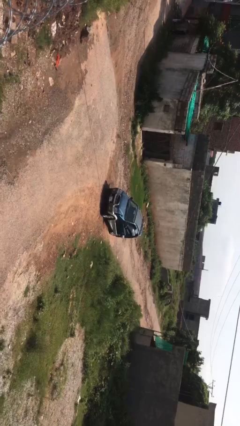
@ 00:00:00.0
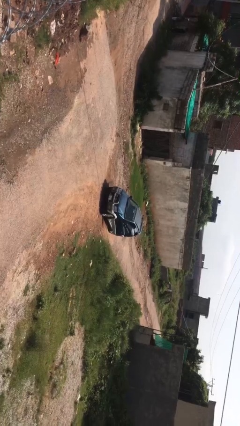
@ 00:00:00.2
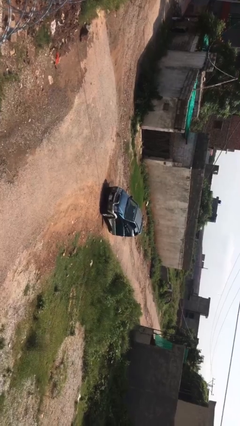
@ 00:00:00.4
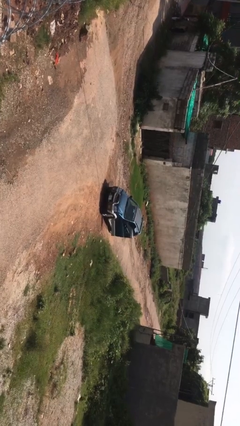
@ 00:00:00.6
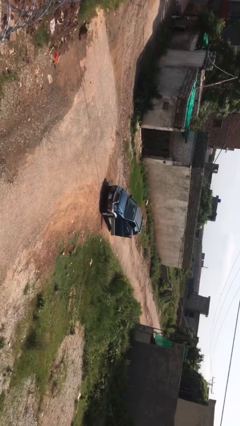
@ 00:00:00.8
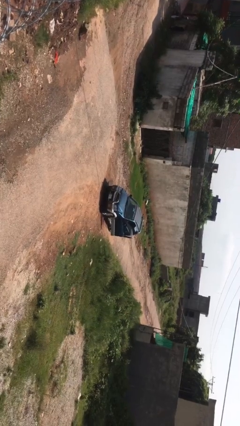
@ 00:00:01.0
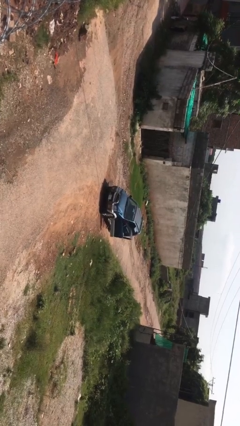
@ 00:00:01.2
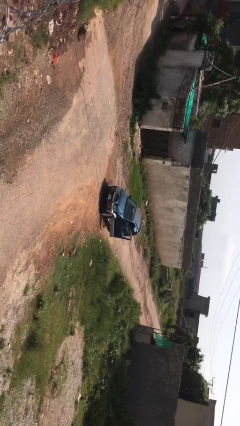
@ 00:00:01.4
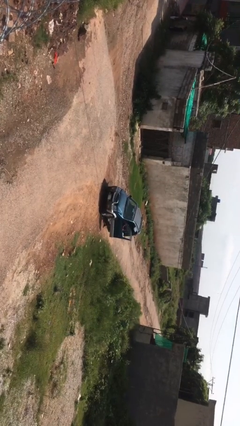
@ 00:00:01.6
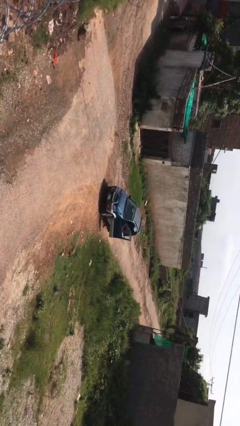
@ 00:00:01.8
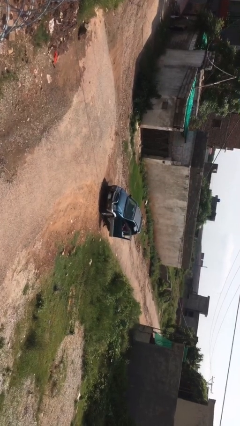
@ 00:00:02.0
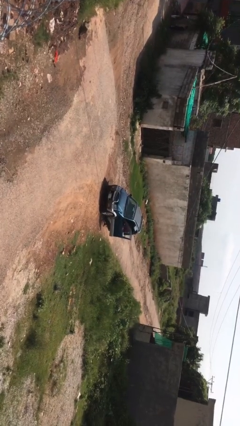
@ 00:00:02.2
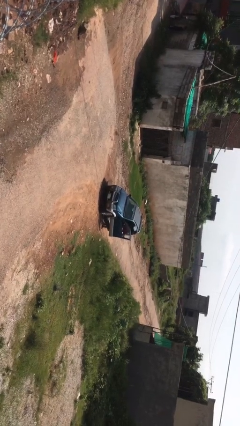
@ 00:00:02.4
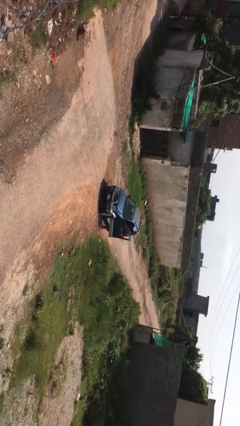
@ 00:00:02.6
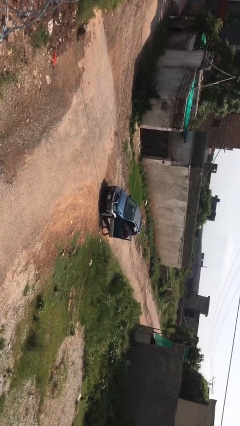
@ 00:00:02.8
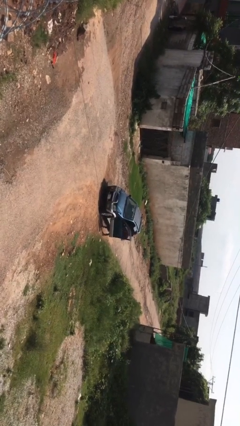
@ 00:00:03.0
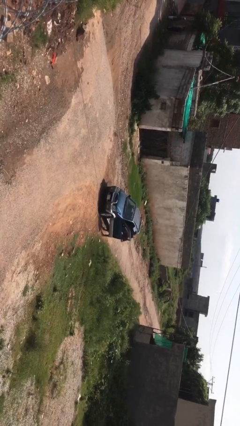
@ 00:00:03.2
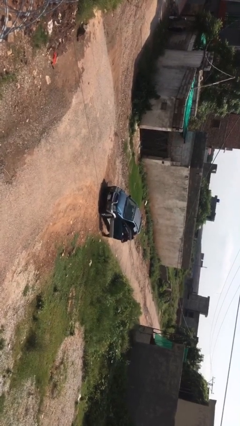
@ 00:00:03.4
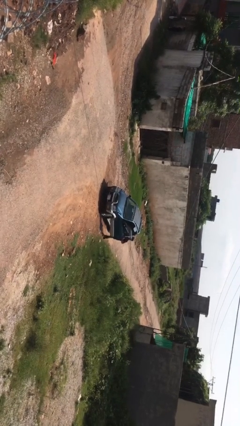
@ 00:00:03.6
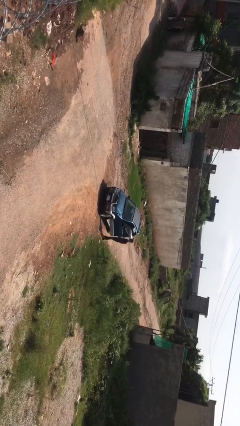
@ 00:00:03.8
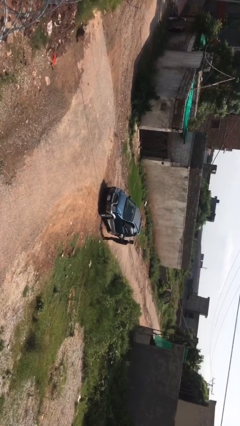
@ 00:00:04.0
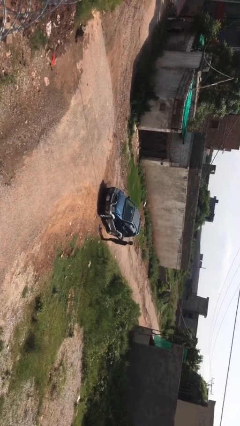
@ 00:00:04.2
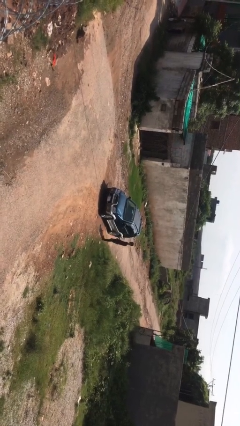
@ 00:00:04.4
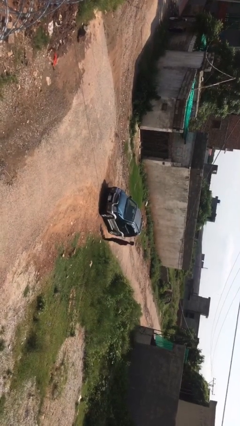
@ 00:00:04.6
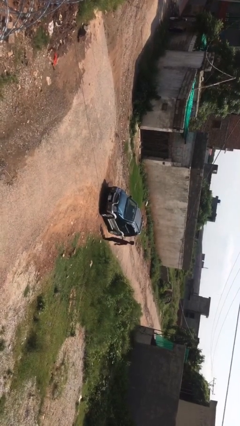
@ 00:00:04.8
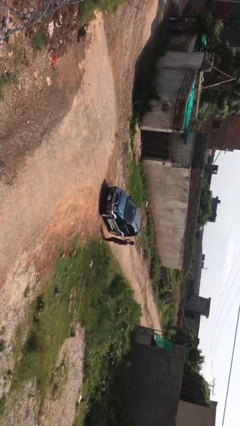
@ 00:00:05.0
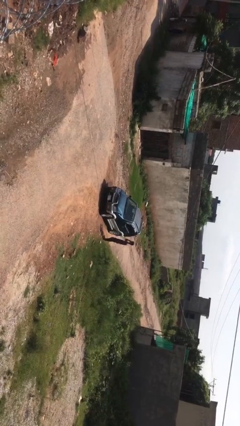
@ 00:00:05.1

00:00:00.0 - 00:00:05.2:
car drops off person

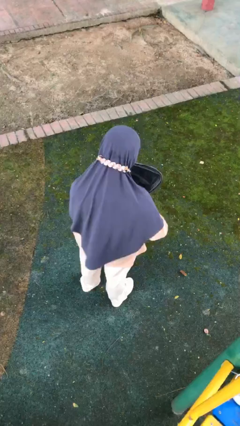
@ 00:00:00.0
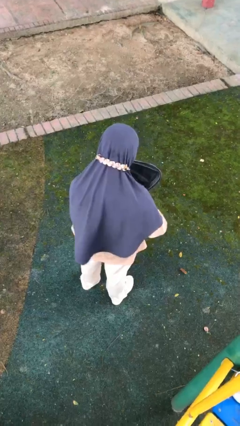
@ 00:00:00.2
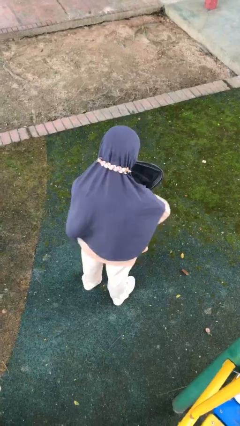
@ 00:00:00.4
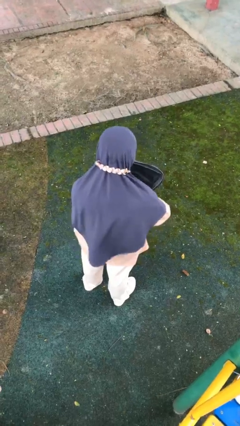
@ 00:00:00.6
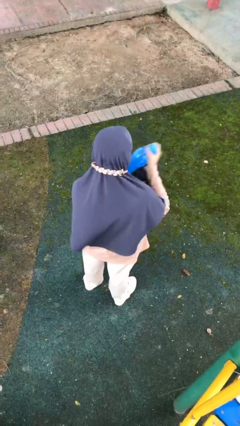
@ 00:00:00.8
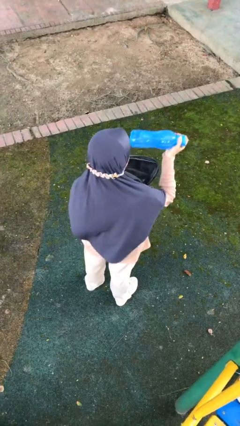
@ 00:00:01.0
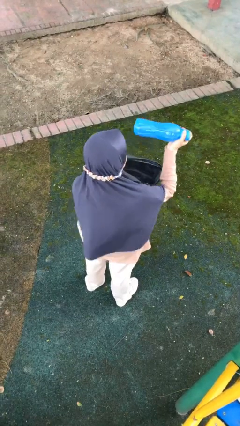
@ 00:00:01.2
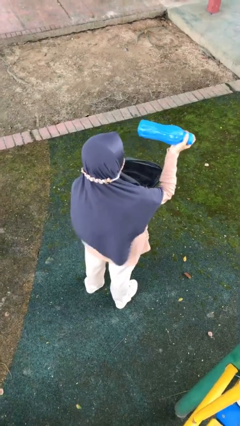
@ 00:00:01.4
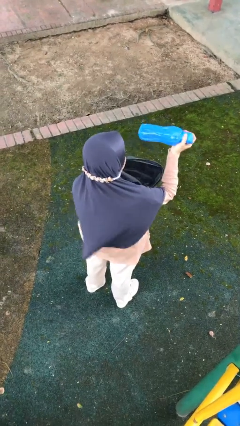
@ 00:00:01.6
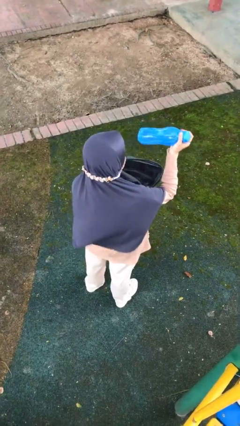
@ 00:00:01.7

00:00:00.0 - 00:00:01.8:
person takes object from backpack

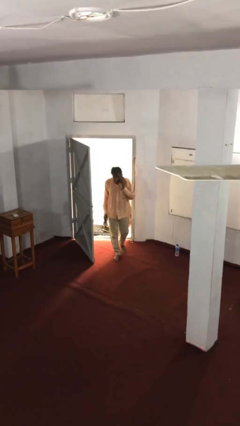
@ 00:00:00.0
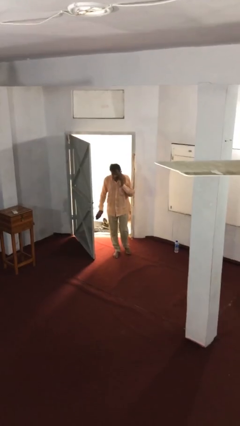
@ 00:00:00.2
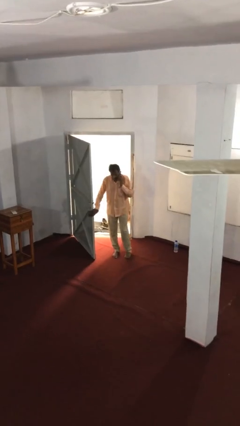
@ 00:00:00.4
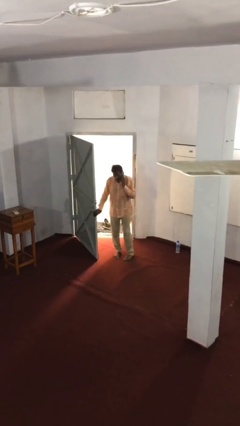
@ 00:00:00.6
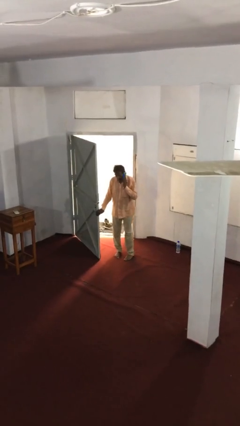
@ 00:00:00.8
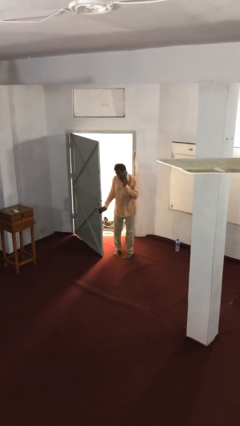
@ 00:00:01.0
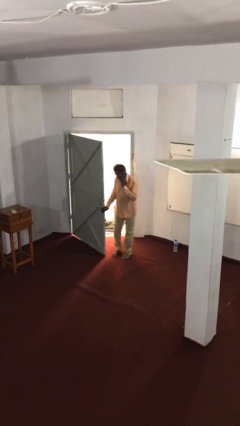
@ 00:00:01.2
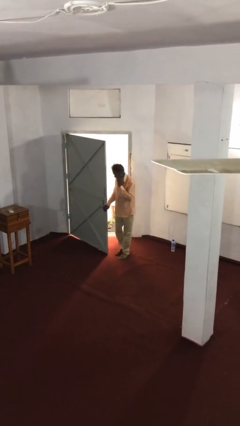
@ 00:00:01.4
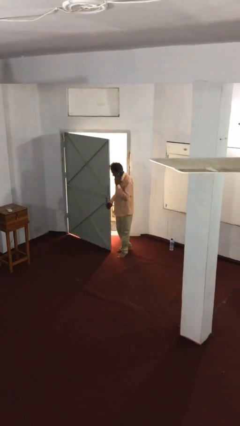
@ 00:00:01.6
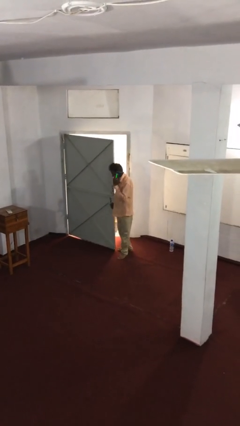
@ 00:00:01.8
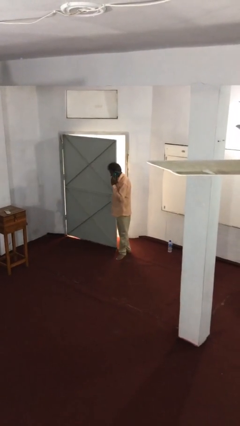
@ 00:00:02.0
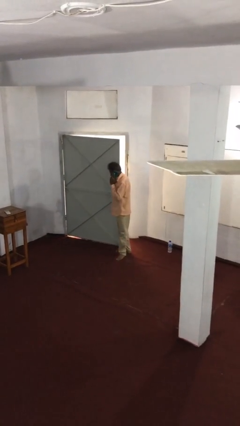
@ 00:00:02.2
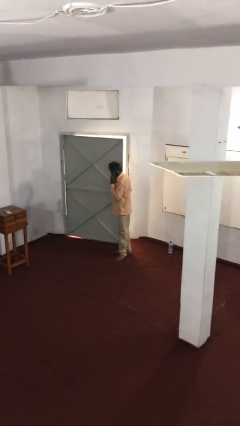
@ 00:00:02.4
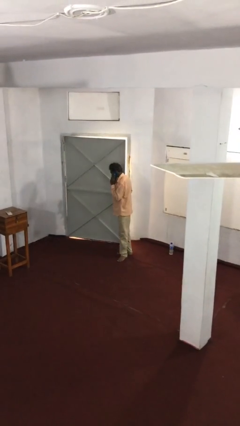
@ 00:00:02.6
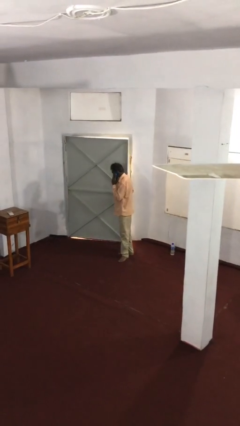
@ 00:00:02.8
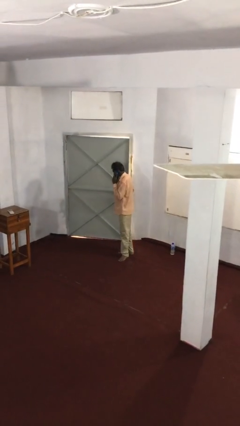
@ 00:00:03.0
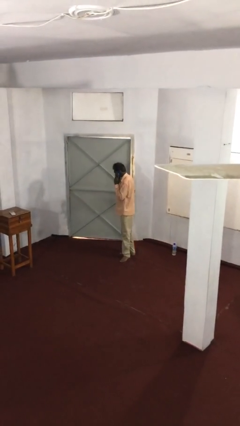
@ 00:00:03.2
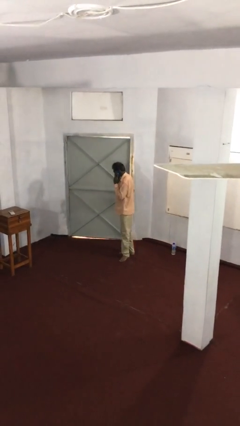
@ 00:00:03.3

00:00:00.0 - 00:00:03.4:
person closes facility door

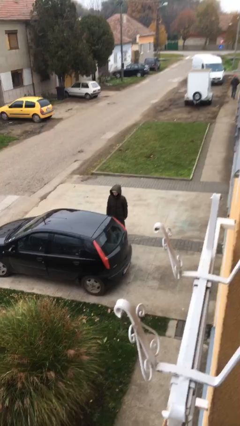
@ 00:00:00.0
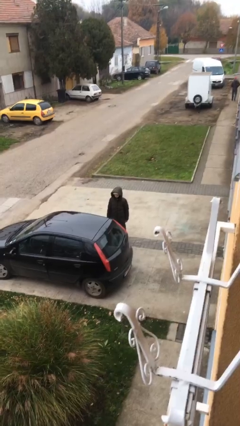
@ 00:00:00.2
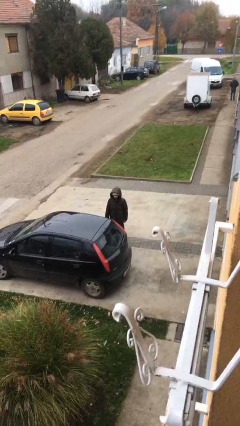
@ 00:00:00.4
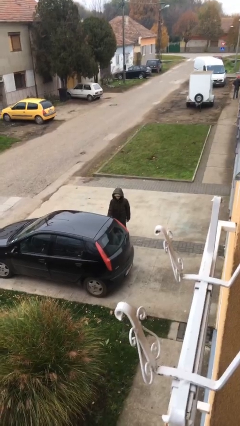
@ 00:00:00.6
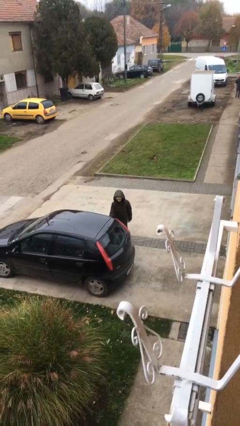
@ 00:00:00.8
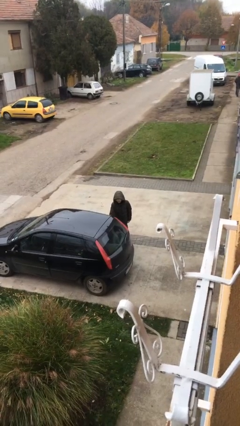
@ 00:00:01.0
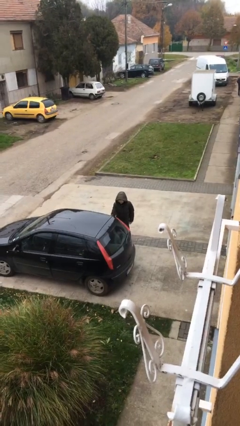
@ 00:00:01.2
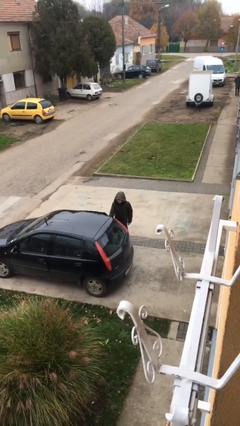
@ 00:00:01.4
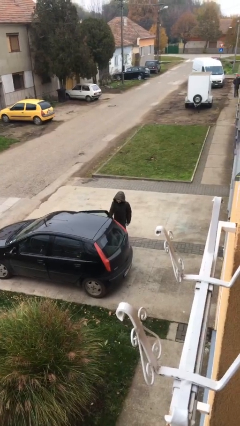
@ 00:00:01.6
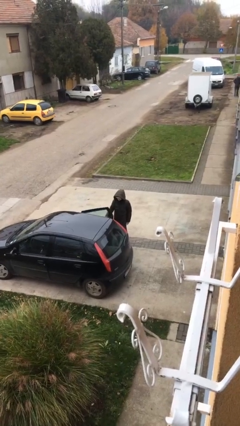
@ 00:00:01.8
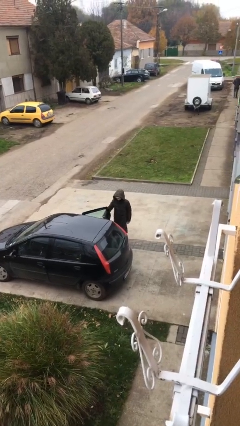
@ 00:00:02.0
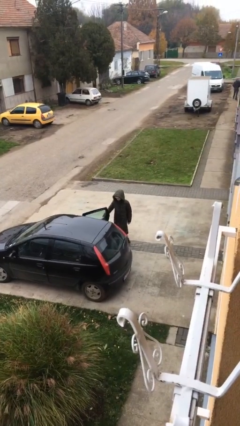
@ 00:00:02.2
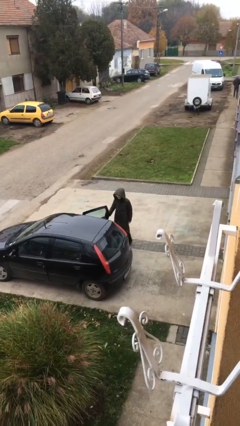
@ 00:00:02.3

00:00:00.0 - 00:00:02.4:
person opens car door

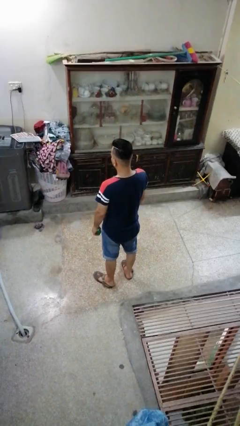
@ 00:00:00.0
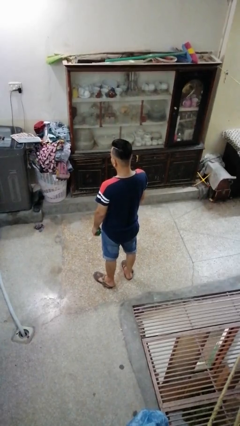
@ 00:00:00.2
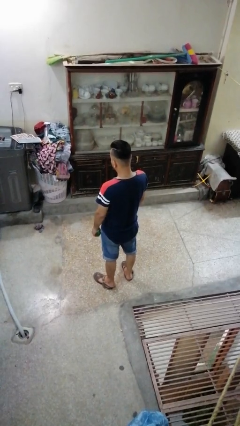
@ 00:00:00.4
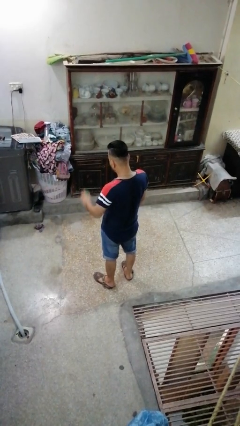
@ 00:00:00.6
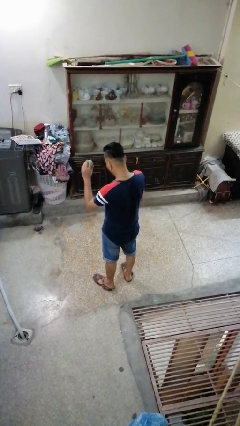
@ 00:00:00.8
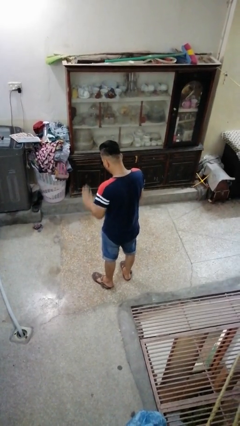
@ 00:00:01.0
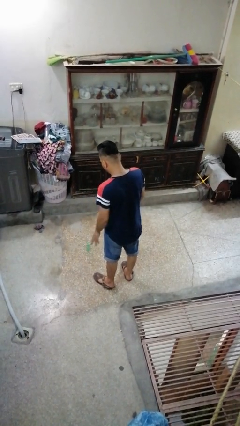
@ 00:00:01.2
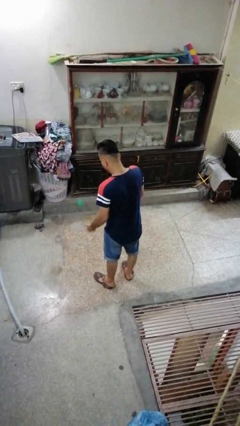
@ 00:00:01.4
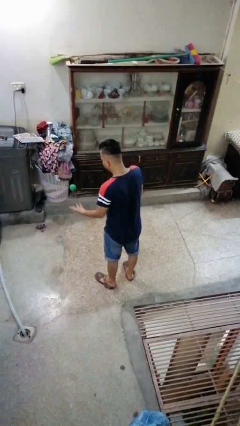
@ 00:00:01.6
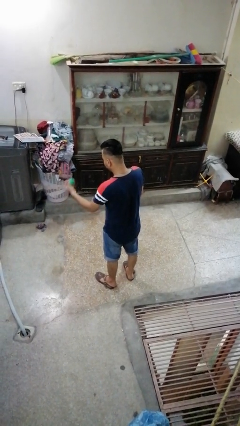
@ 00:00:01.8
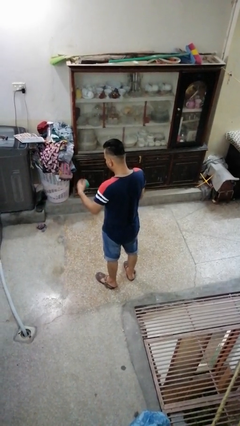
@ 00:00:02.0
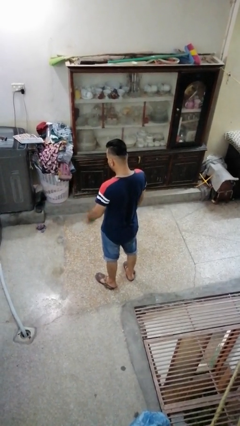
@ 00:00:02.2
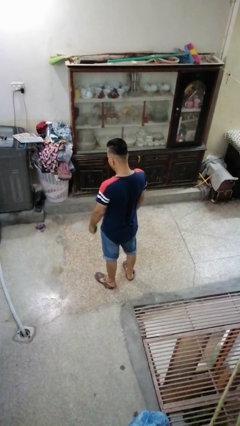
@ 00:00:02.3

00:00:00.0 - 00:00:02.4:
person bounces ball on floor

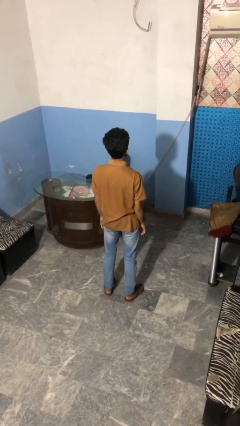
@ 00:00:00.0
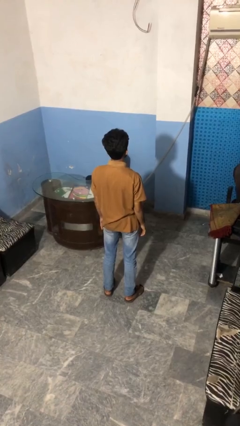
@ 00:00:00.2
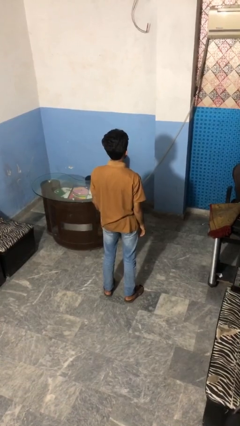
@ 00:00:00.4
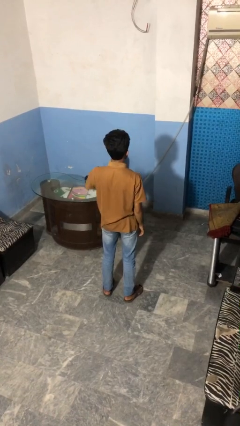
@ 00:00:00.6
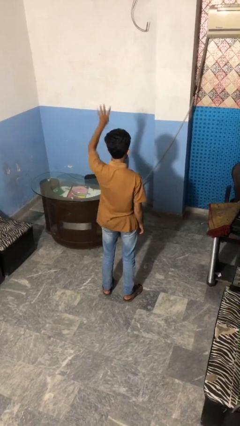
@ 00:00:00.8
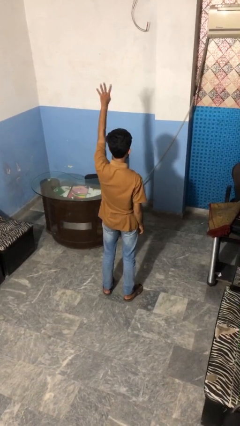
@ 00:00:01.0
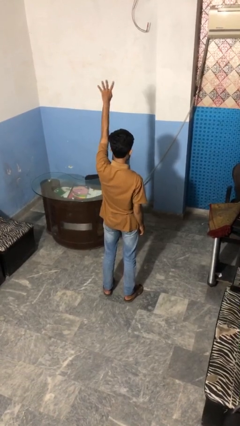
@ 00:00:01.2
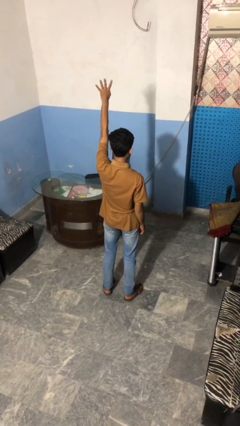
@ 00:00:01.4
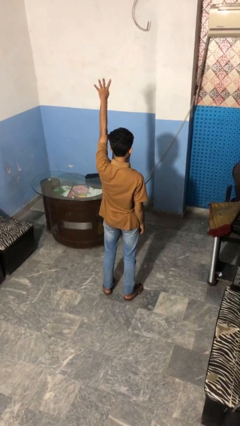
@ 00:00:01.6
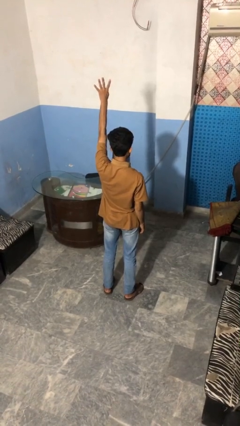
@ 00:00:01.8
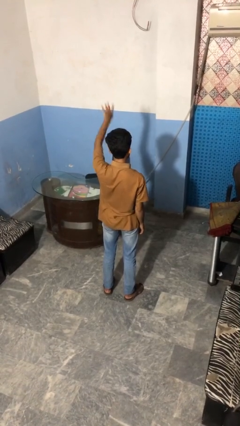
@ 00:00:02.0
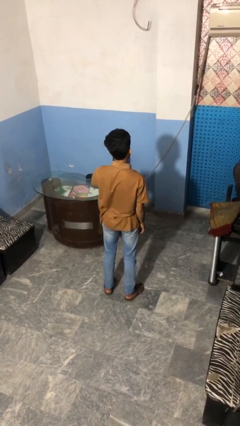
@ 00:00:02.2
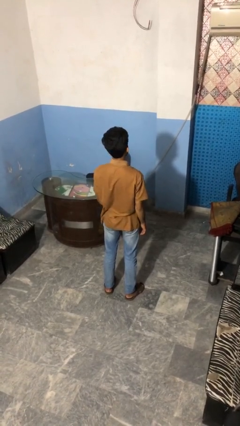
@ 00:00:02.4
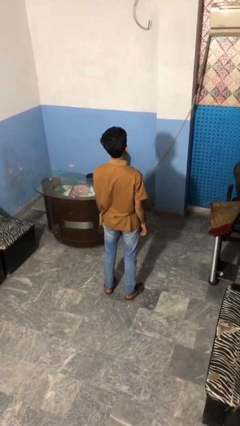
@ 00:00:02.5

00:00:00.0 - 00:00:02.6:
person gestures number four
